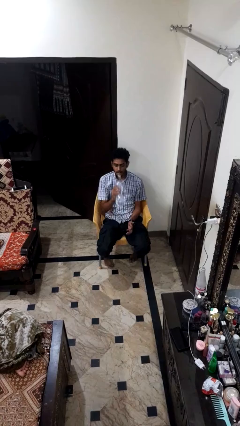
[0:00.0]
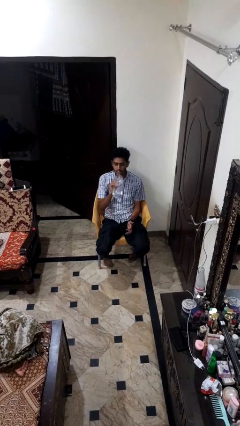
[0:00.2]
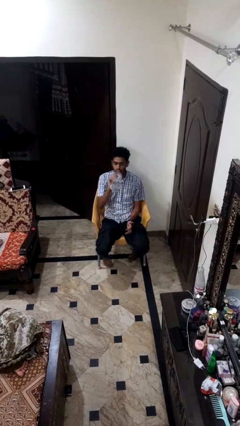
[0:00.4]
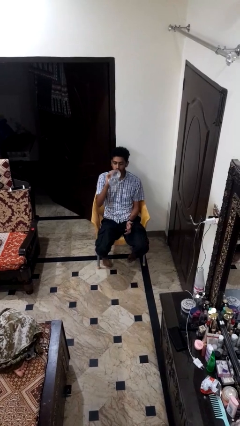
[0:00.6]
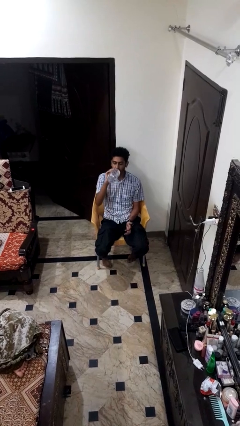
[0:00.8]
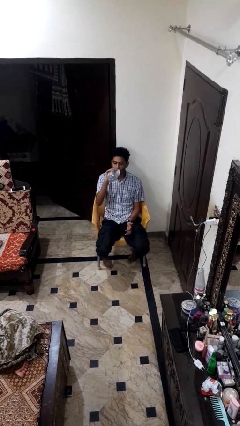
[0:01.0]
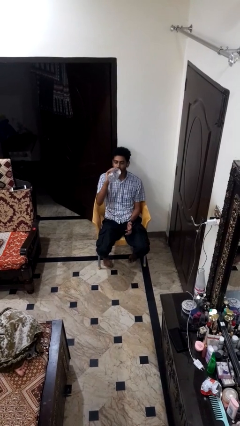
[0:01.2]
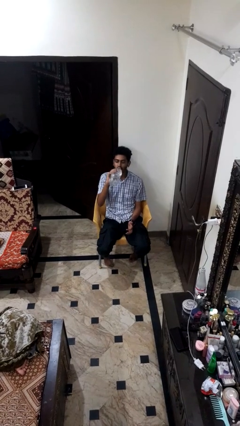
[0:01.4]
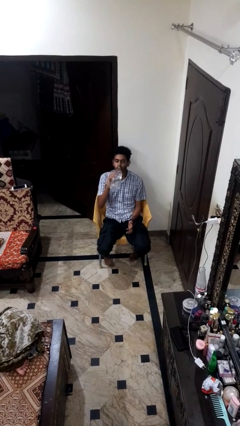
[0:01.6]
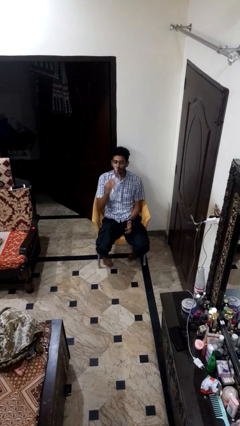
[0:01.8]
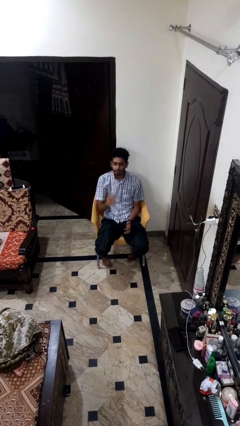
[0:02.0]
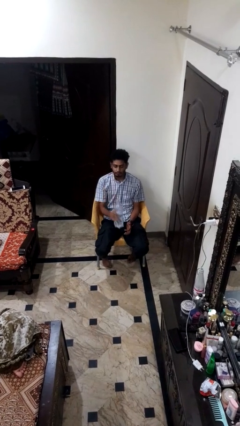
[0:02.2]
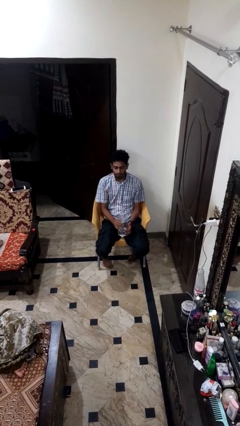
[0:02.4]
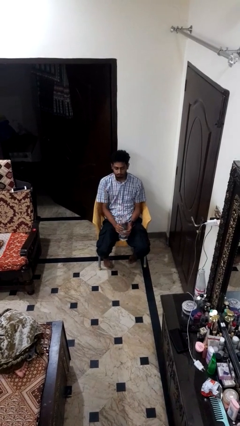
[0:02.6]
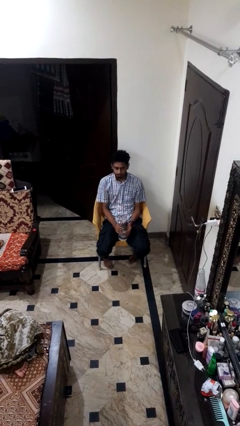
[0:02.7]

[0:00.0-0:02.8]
person drinks from bottle

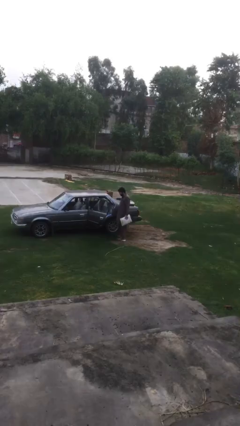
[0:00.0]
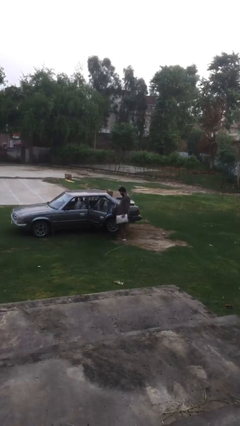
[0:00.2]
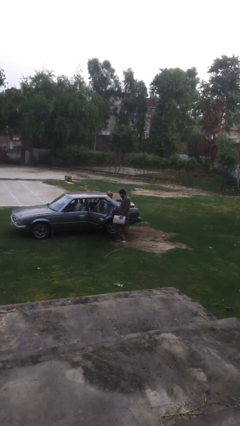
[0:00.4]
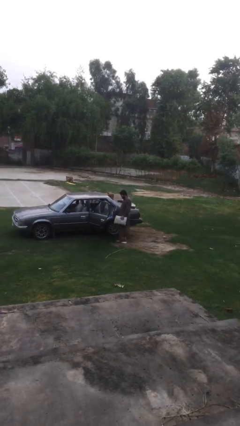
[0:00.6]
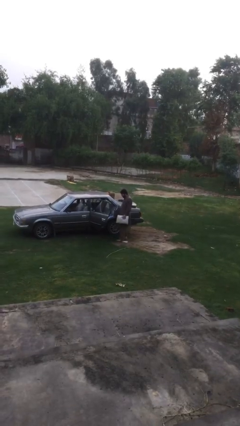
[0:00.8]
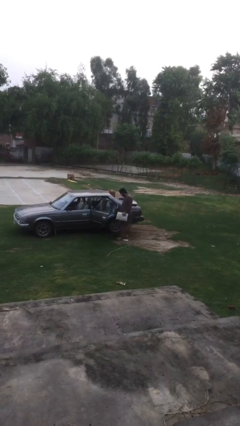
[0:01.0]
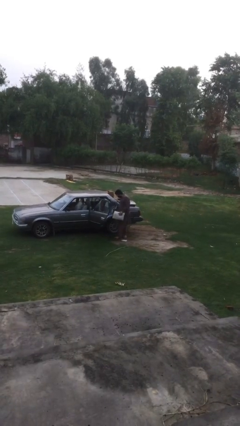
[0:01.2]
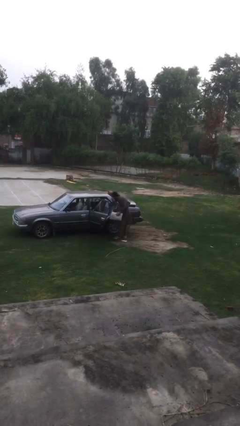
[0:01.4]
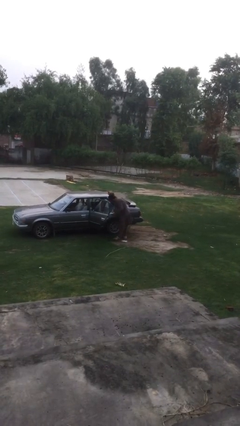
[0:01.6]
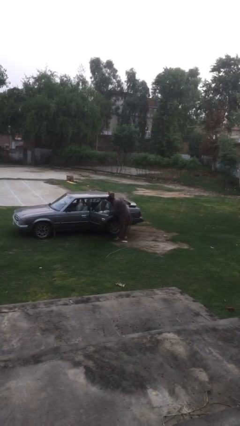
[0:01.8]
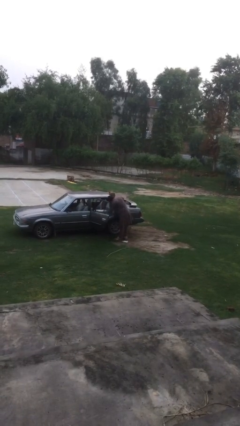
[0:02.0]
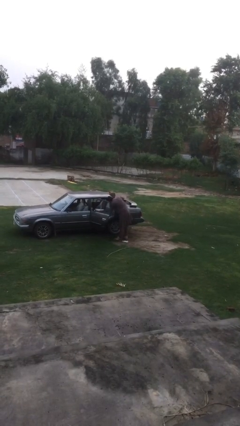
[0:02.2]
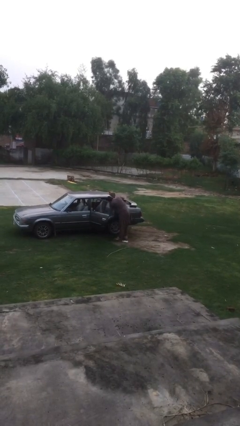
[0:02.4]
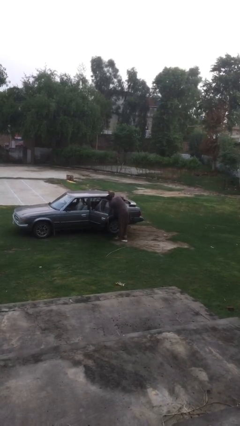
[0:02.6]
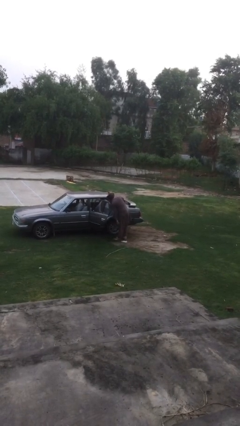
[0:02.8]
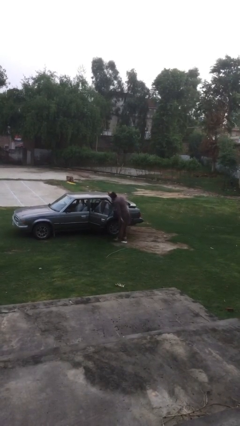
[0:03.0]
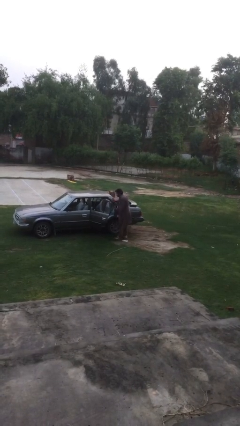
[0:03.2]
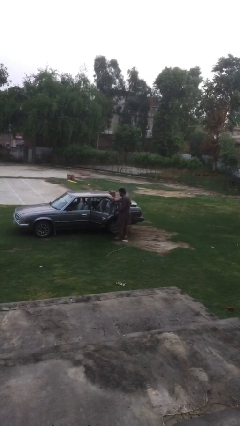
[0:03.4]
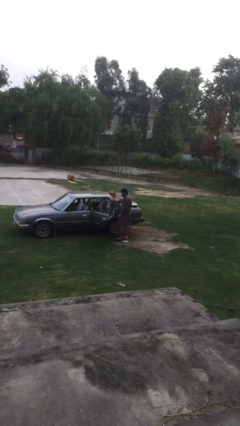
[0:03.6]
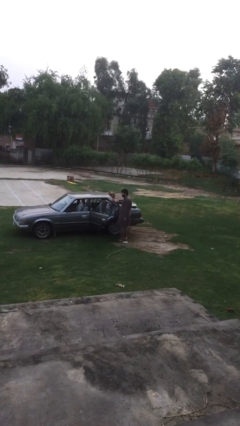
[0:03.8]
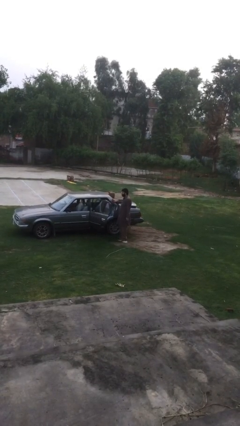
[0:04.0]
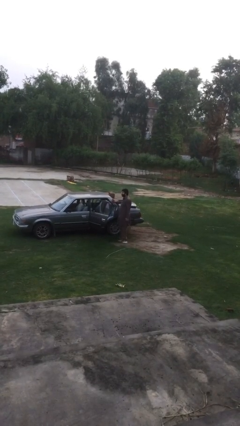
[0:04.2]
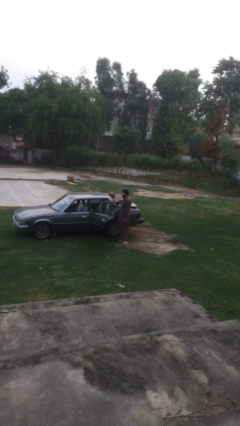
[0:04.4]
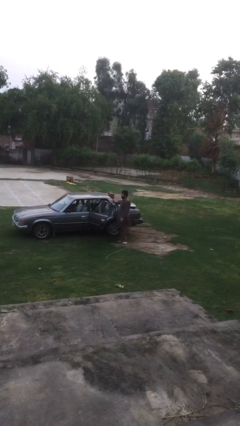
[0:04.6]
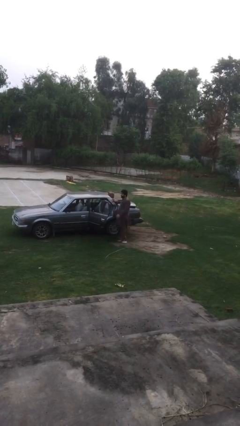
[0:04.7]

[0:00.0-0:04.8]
person loads car

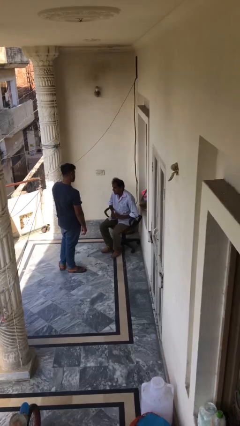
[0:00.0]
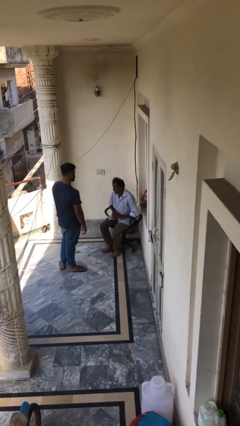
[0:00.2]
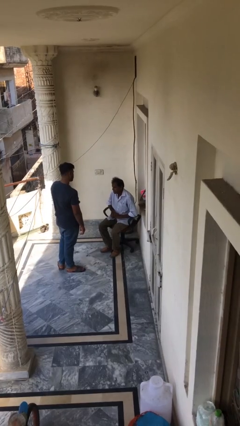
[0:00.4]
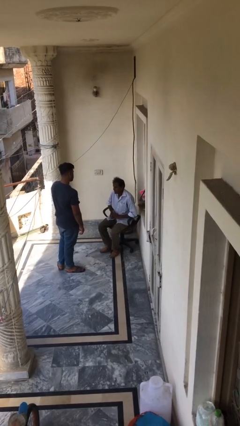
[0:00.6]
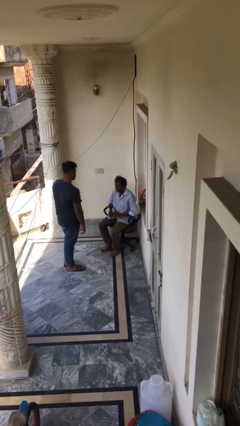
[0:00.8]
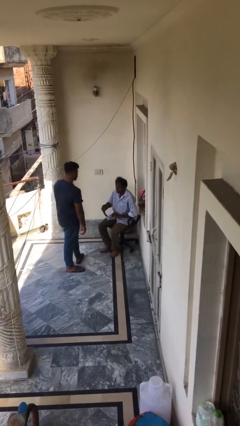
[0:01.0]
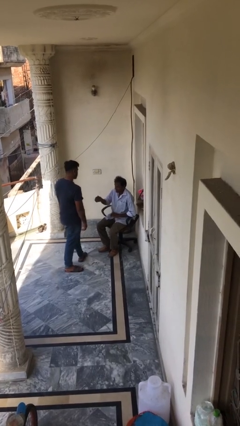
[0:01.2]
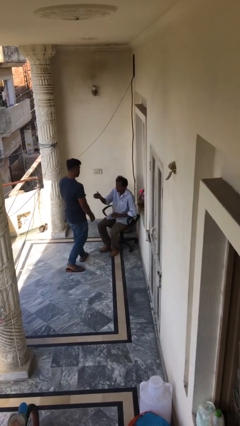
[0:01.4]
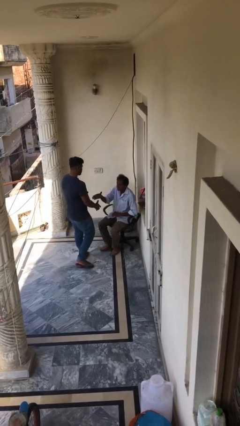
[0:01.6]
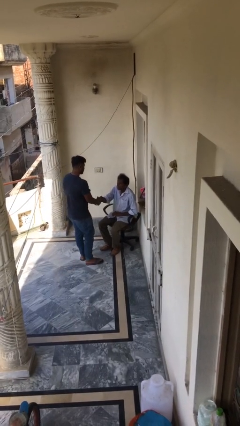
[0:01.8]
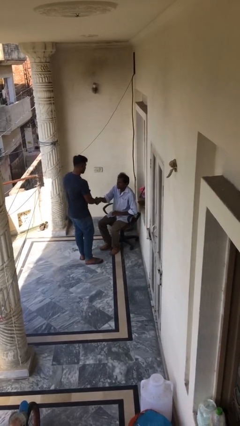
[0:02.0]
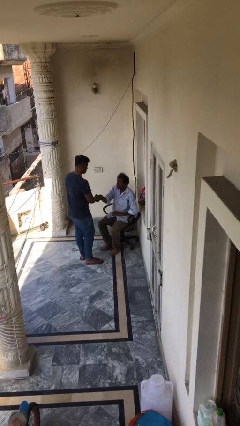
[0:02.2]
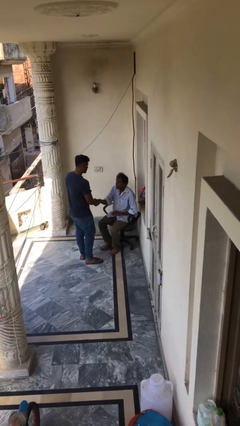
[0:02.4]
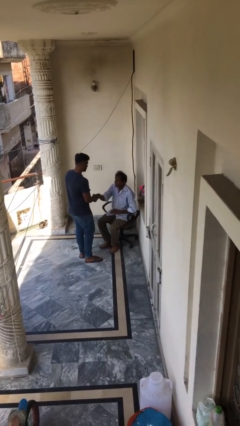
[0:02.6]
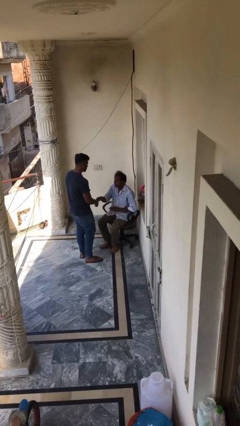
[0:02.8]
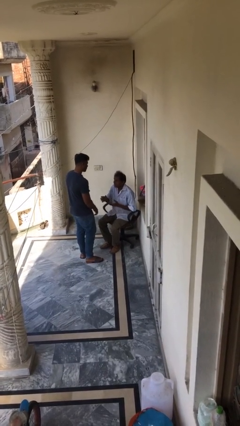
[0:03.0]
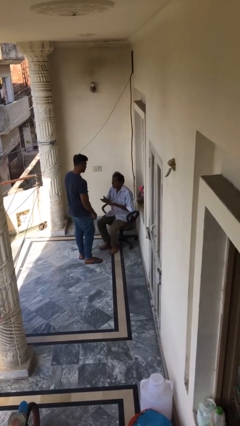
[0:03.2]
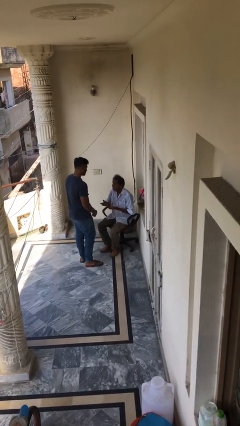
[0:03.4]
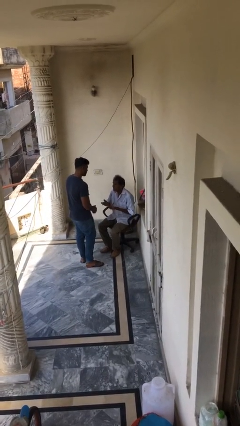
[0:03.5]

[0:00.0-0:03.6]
person shakes hand

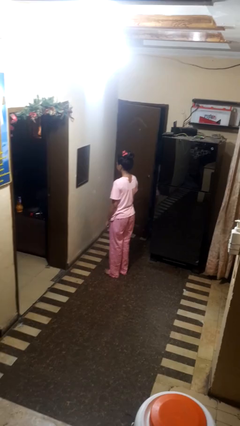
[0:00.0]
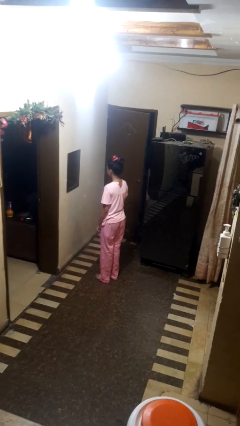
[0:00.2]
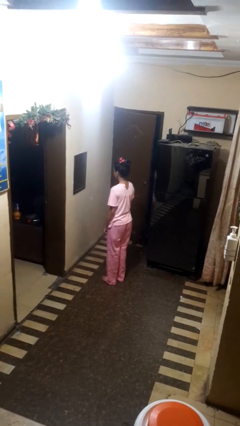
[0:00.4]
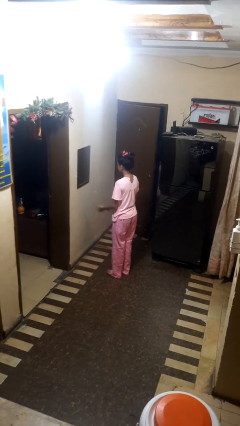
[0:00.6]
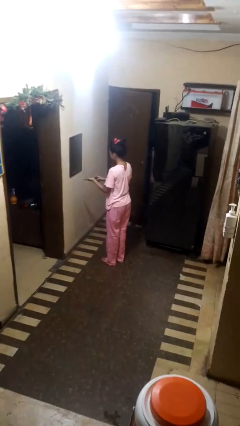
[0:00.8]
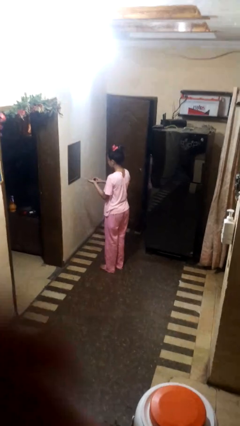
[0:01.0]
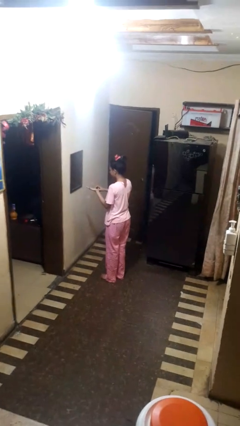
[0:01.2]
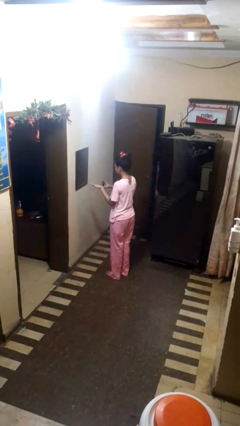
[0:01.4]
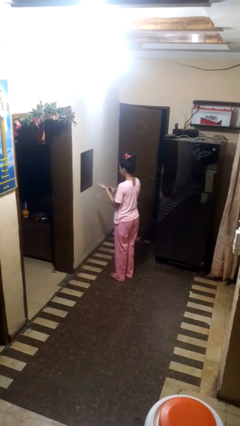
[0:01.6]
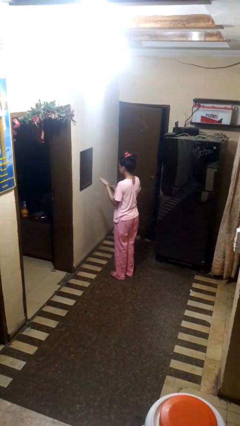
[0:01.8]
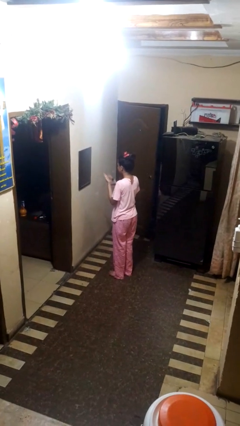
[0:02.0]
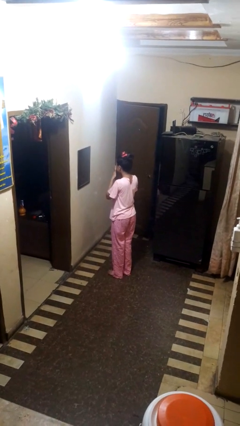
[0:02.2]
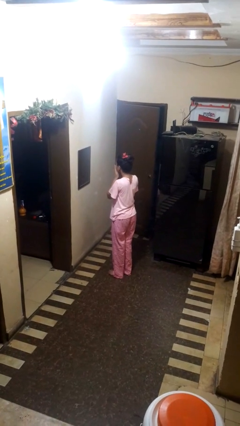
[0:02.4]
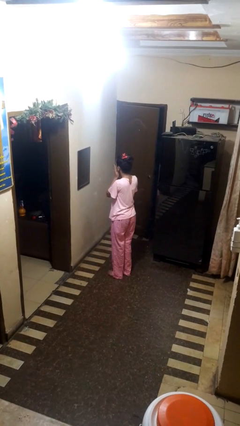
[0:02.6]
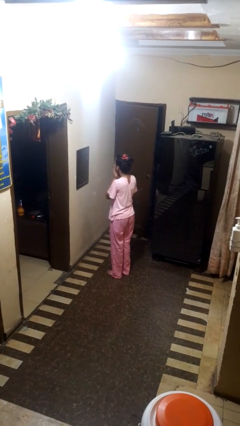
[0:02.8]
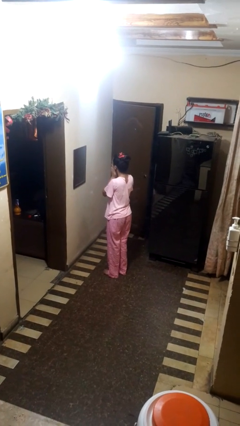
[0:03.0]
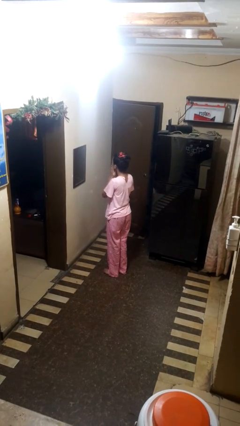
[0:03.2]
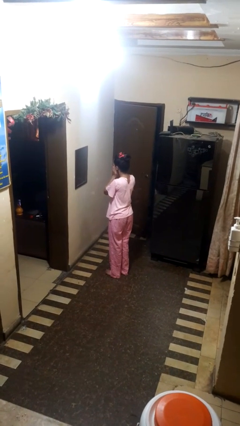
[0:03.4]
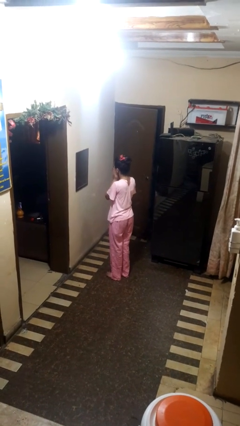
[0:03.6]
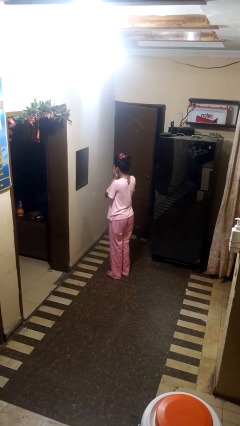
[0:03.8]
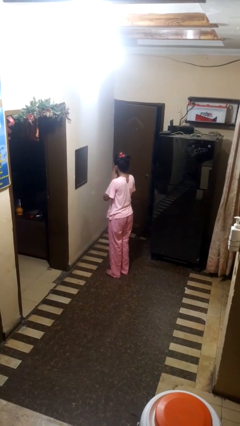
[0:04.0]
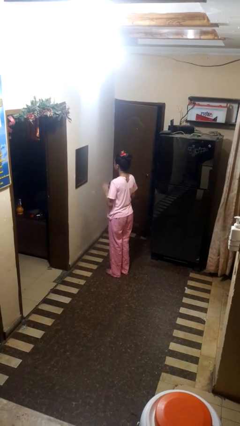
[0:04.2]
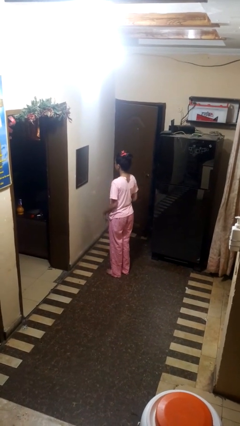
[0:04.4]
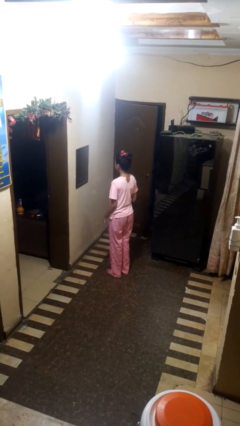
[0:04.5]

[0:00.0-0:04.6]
person applies foundation makeup

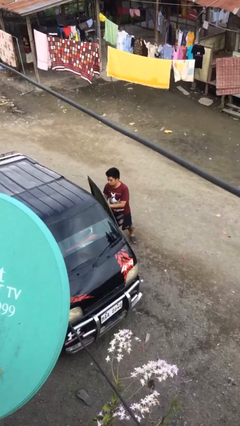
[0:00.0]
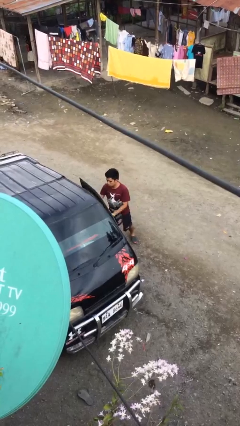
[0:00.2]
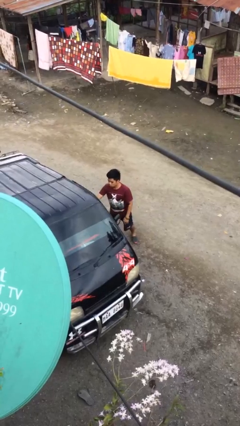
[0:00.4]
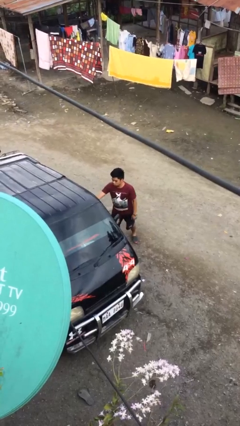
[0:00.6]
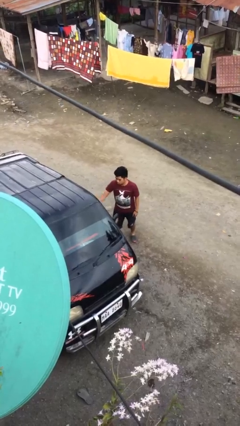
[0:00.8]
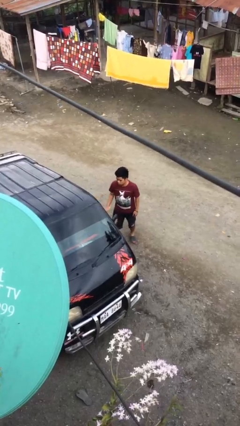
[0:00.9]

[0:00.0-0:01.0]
person closes car door

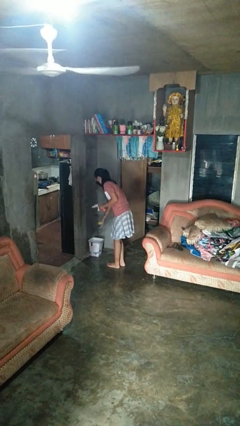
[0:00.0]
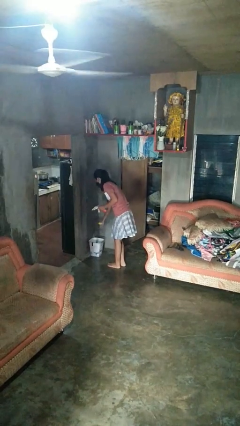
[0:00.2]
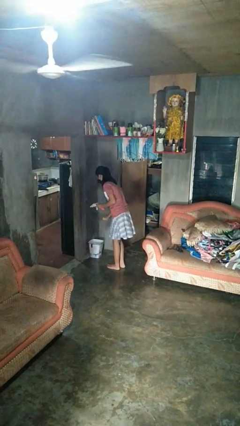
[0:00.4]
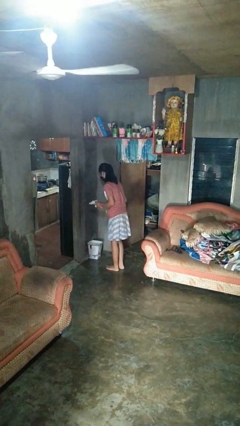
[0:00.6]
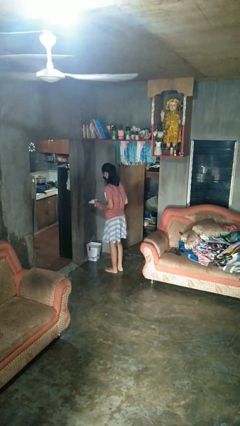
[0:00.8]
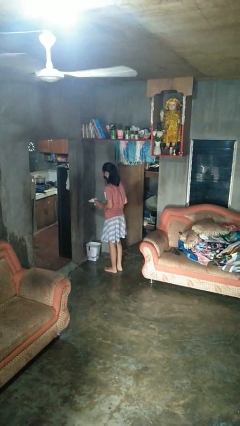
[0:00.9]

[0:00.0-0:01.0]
person discards trash
